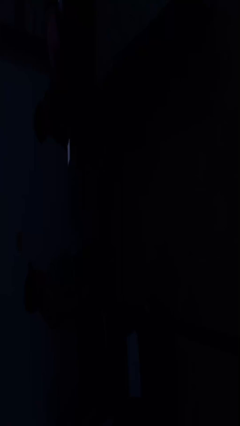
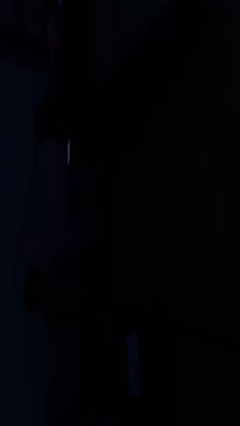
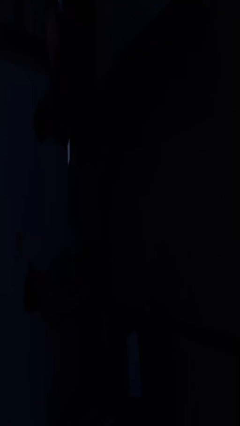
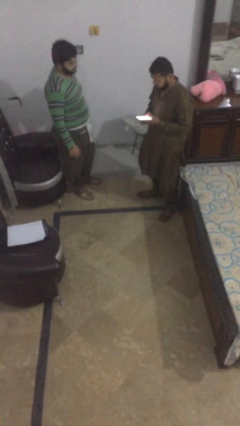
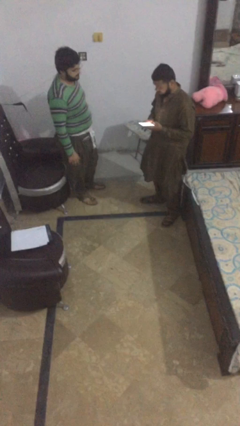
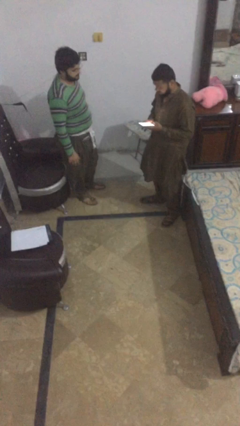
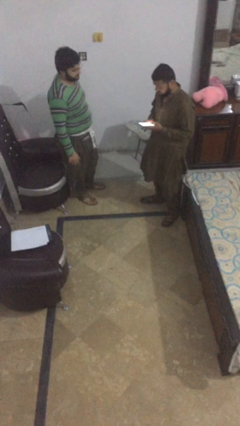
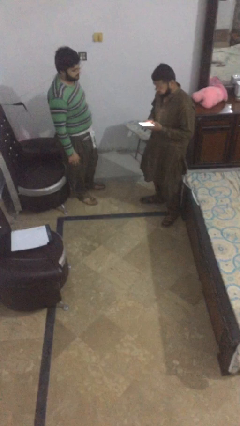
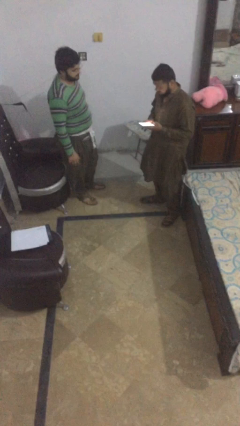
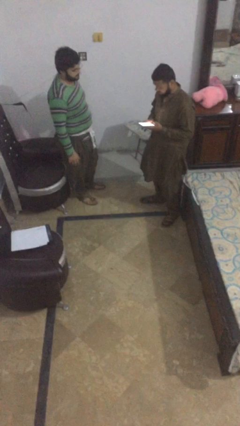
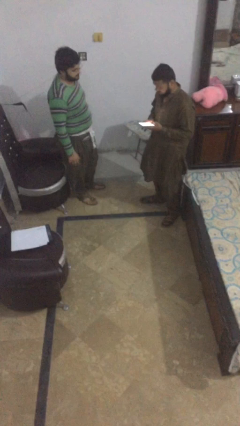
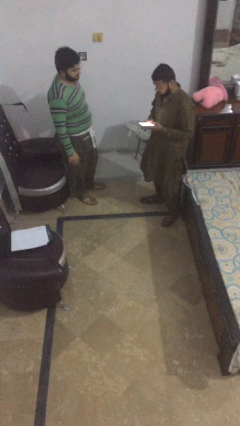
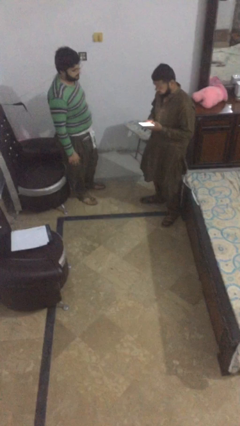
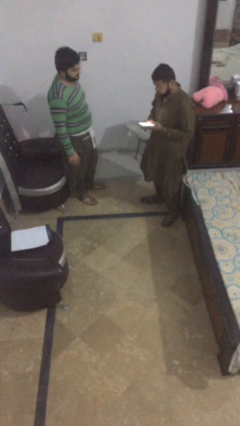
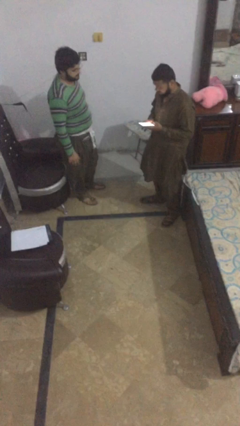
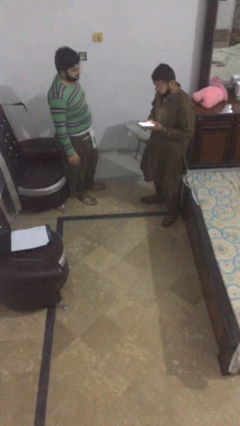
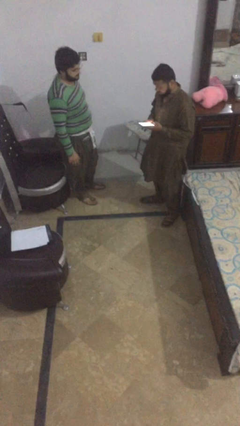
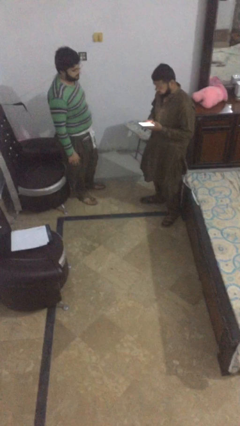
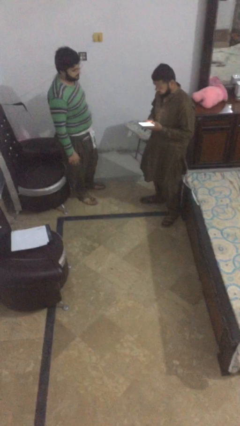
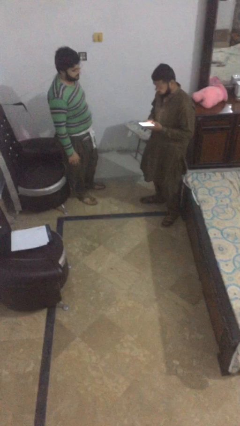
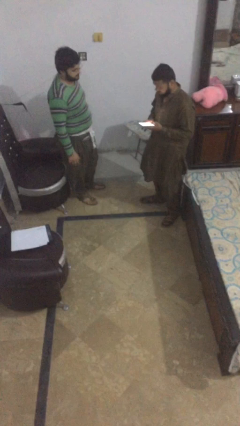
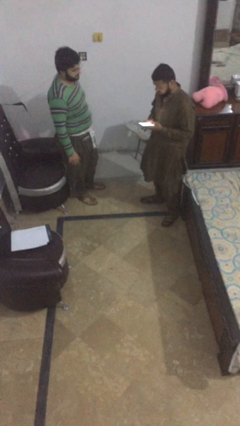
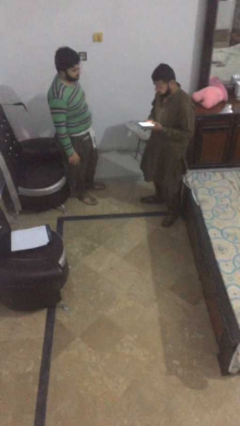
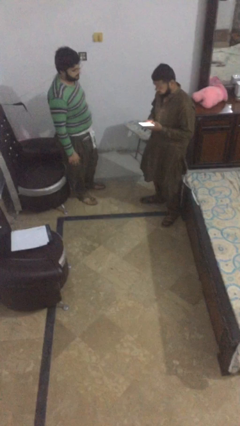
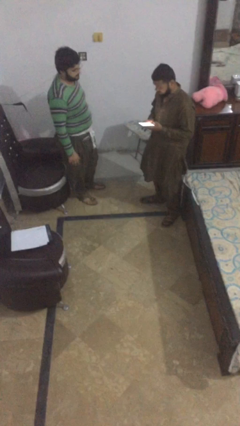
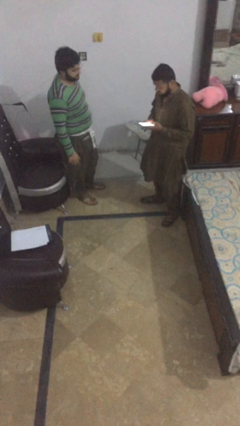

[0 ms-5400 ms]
person shakes hand

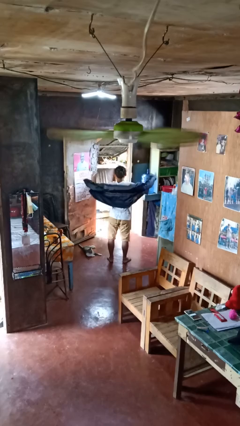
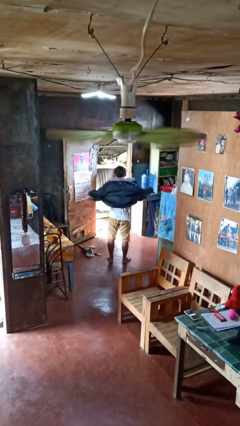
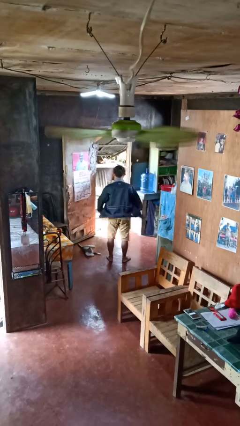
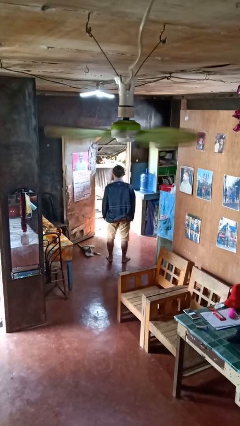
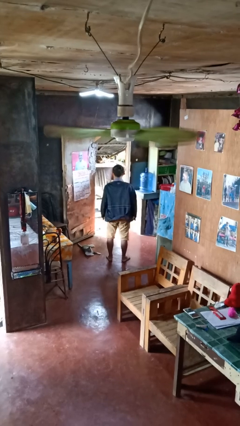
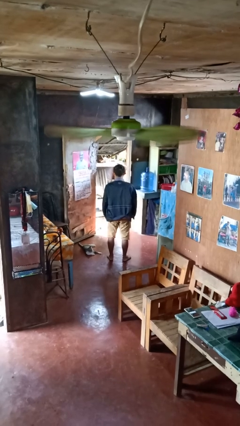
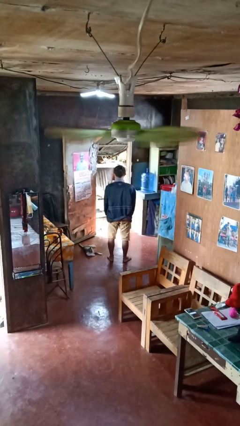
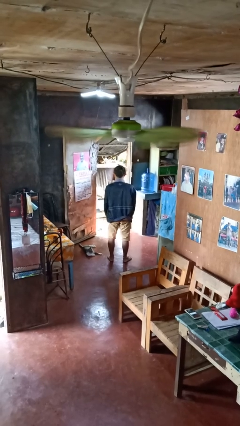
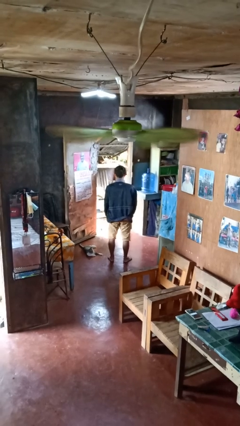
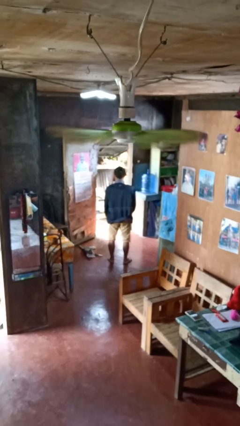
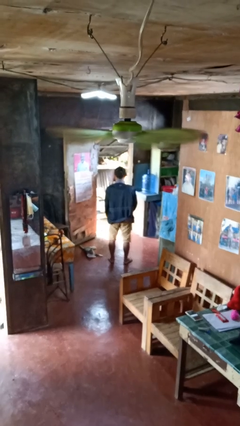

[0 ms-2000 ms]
person puts on jacket

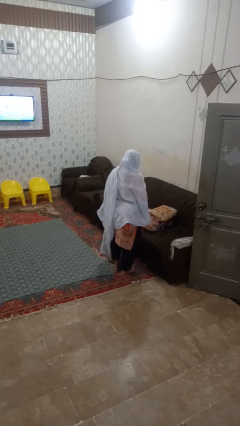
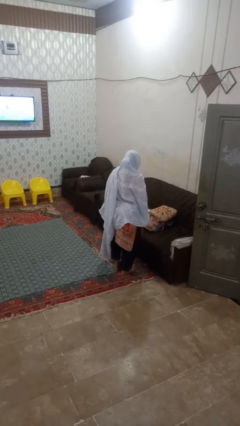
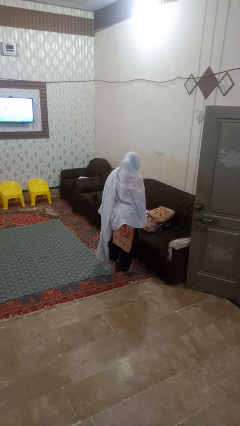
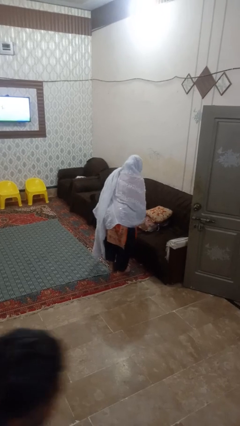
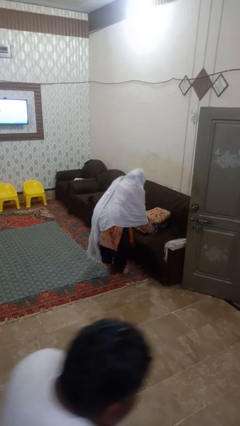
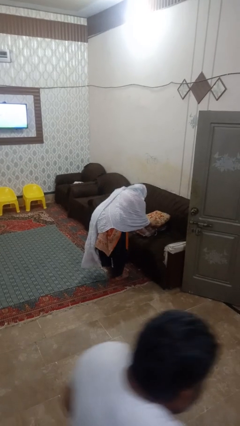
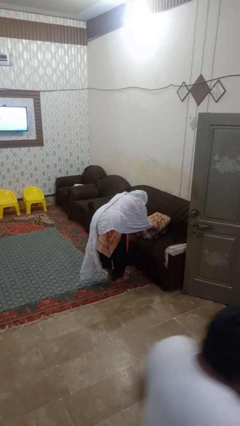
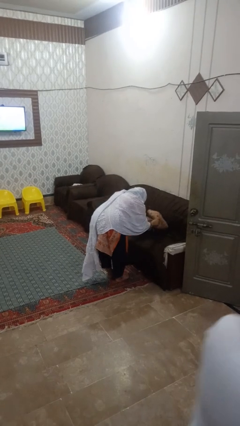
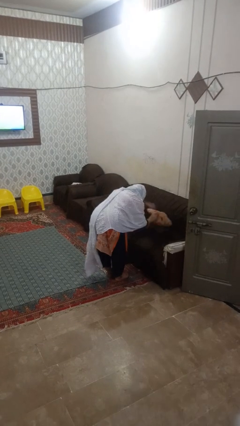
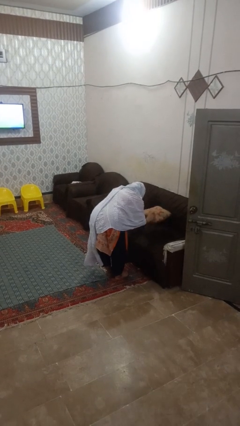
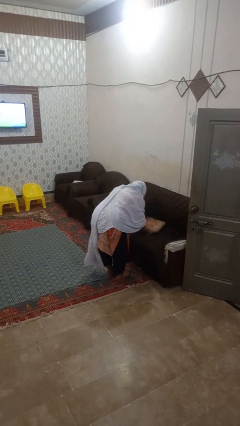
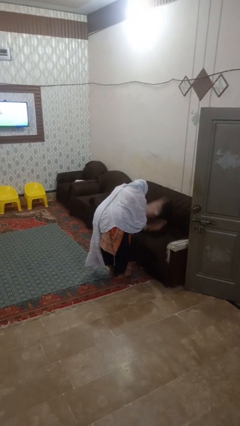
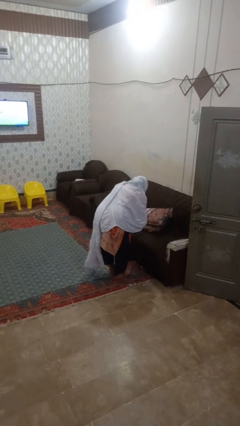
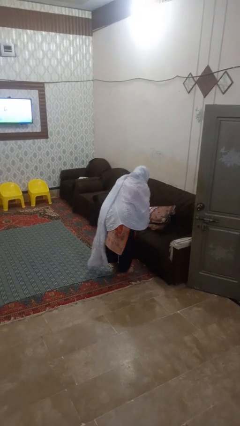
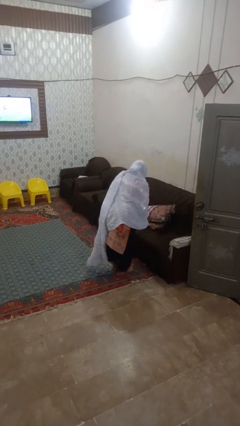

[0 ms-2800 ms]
person searches in couch

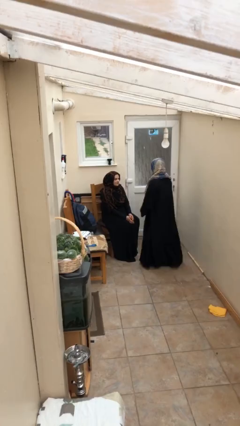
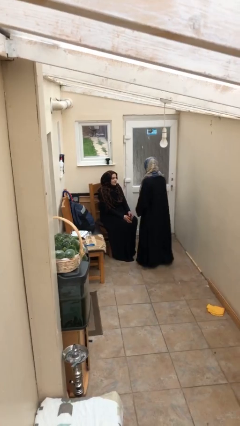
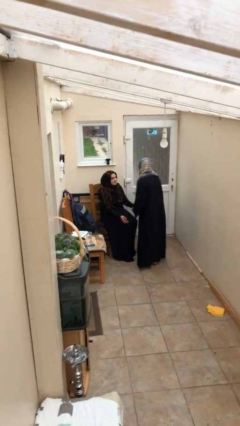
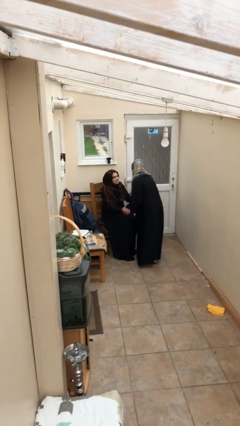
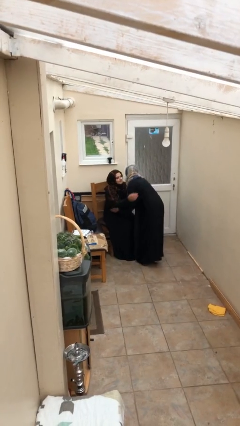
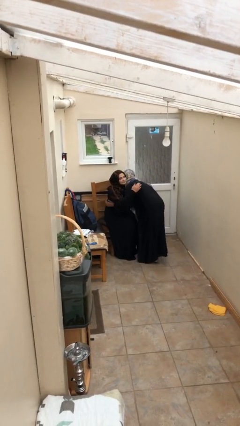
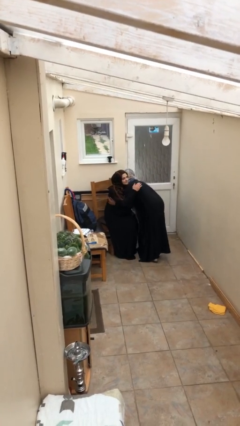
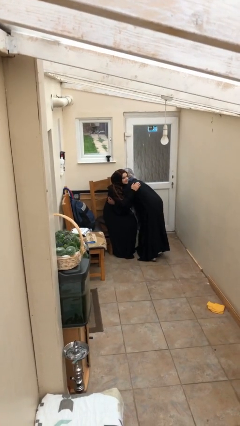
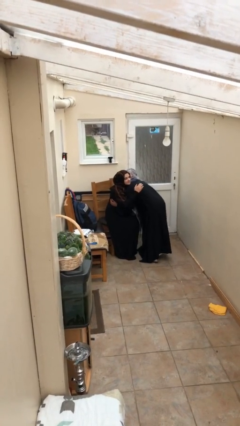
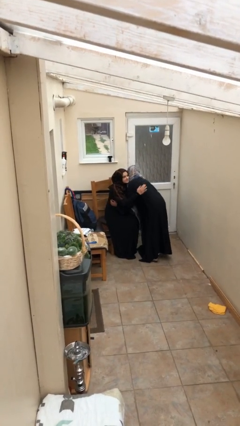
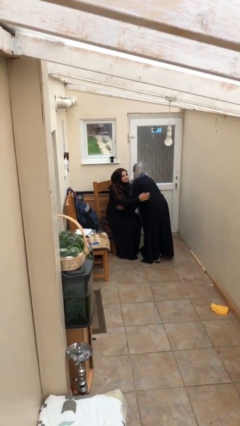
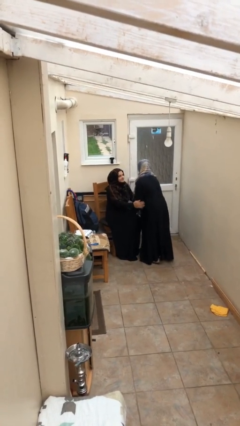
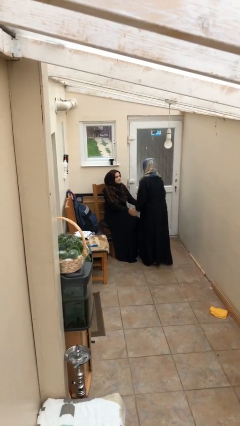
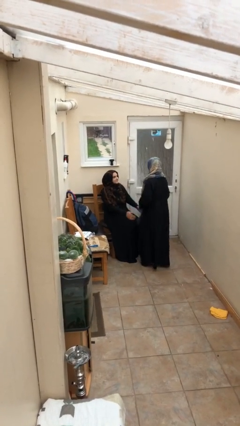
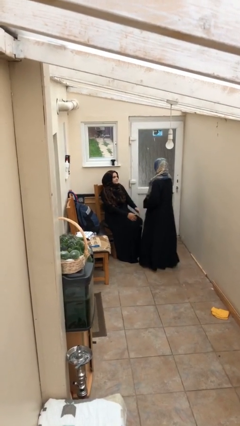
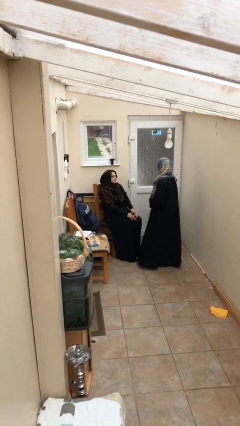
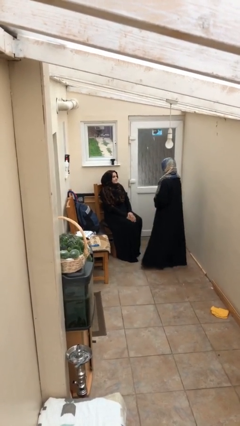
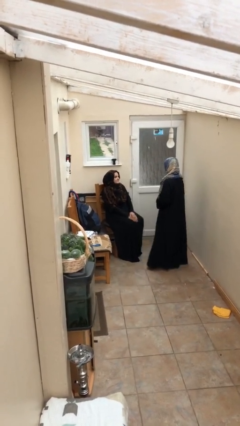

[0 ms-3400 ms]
person embraces person

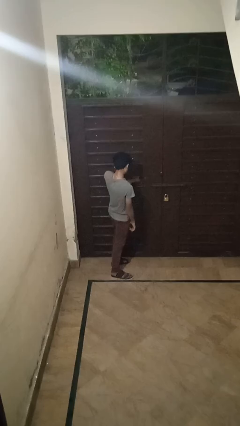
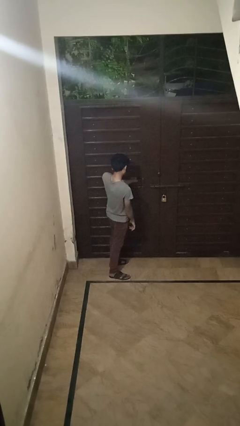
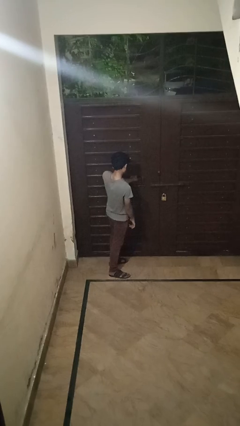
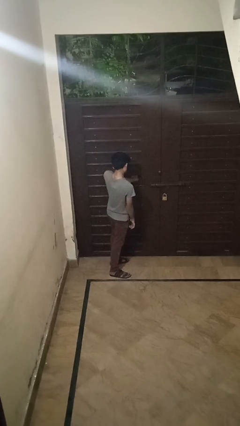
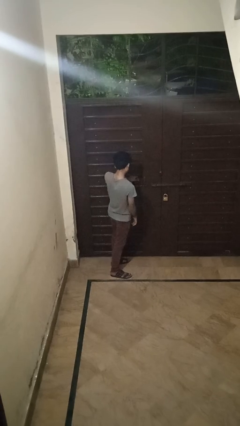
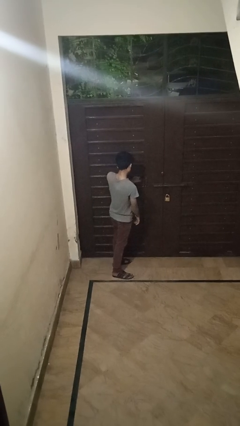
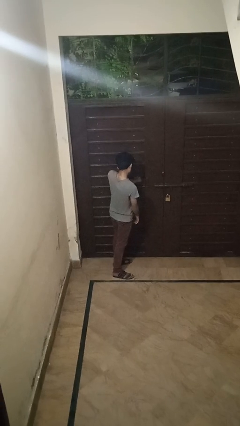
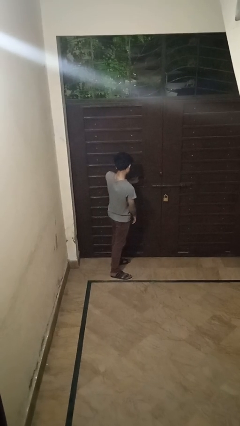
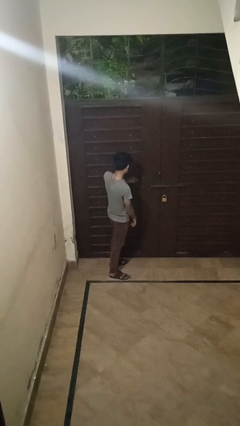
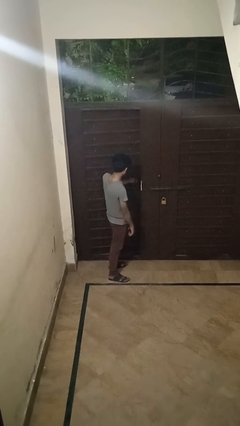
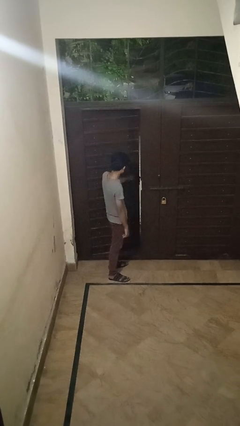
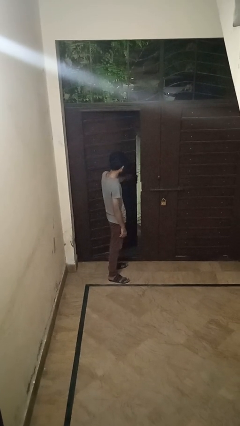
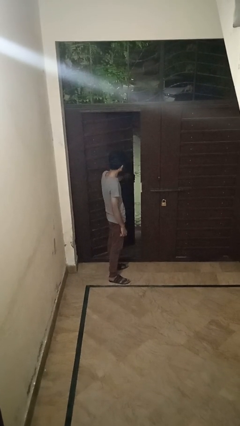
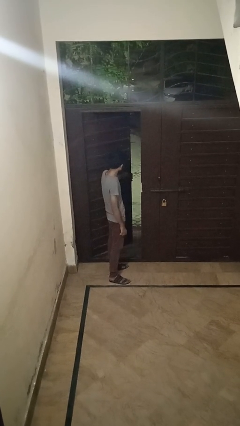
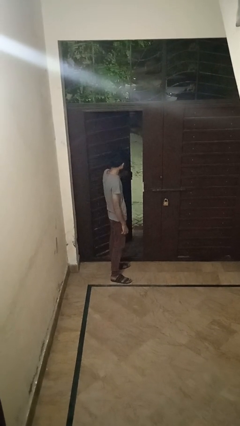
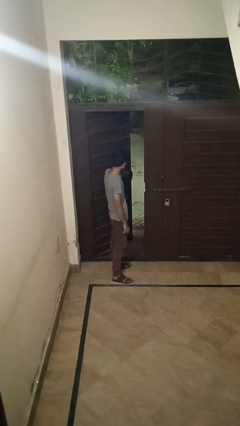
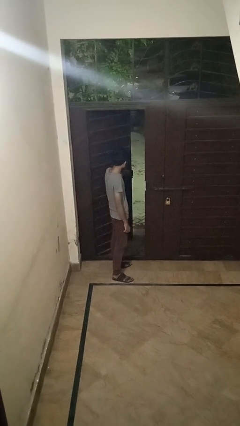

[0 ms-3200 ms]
person opens facility door

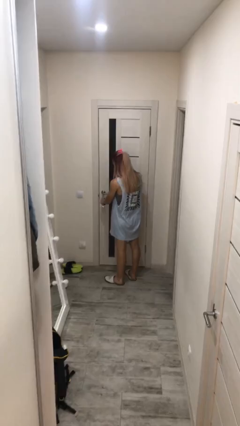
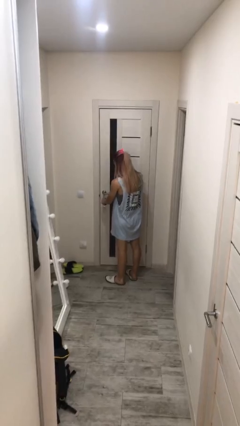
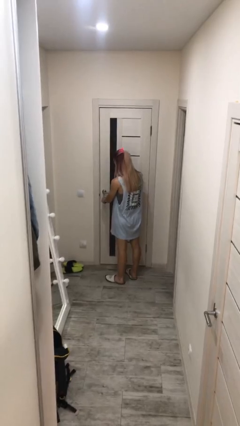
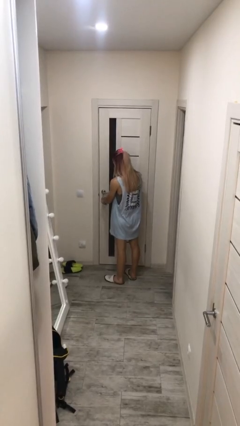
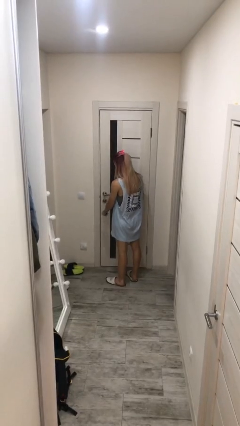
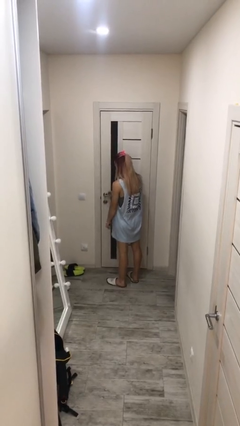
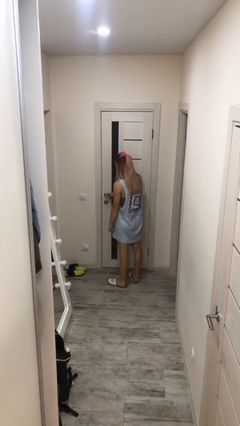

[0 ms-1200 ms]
person unlocks door with keys
